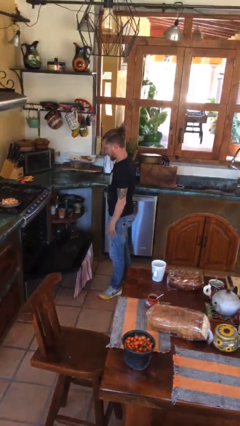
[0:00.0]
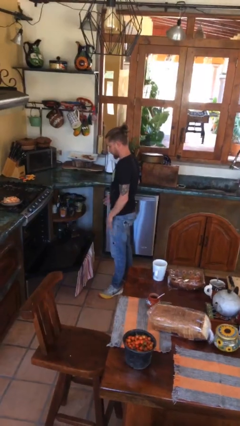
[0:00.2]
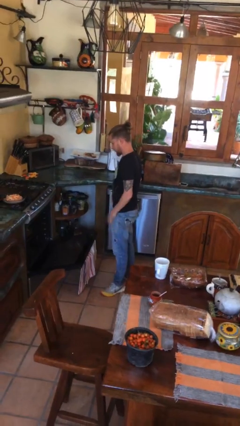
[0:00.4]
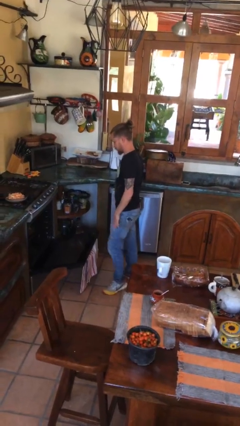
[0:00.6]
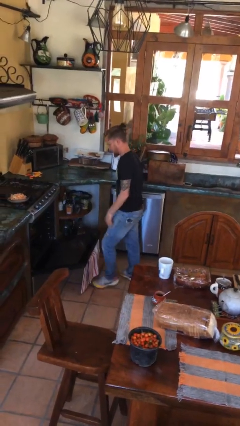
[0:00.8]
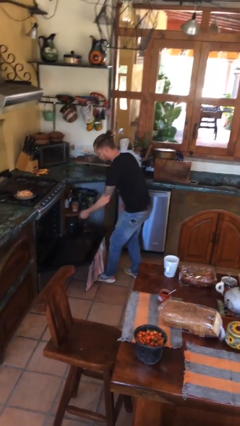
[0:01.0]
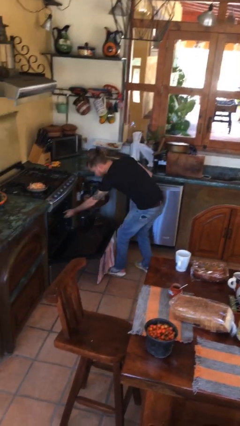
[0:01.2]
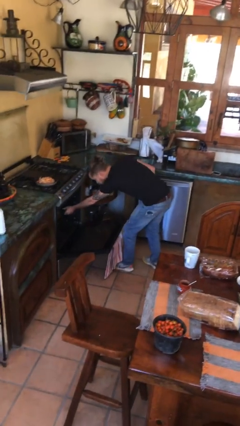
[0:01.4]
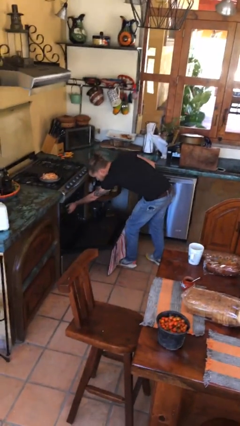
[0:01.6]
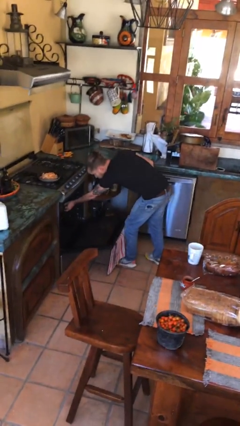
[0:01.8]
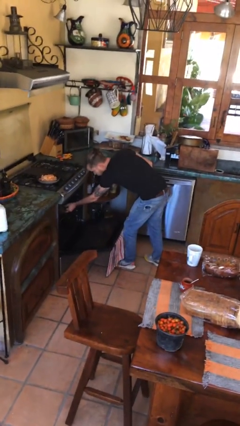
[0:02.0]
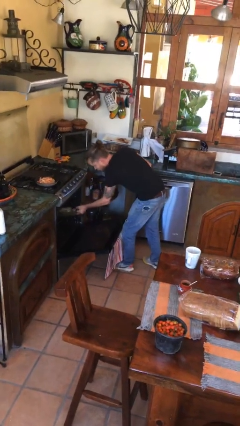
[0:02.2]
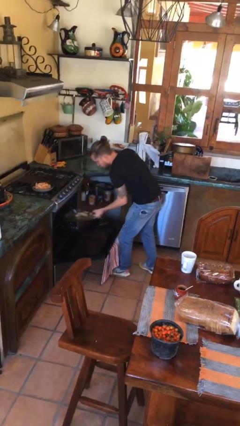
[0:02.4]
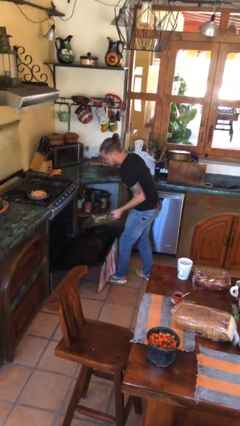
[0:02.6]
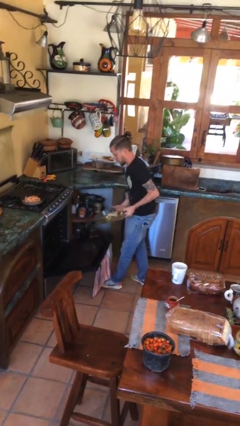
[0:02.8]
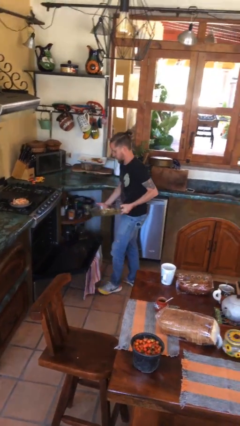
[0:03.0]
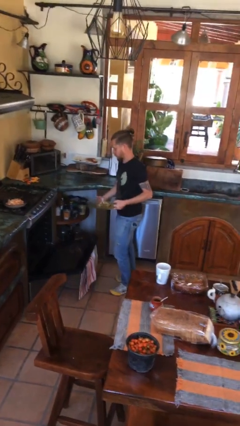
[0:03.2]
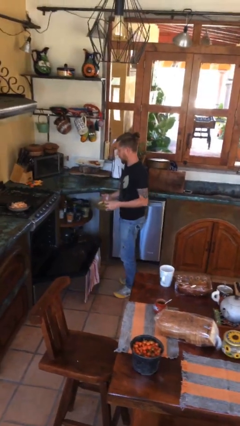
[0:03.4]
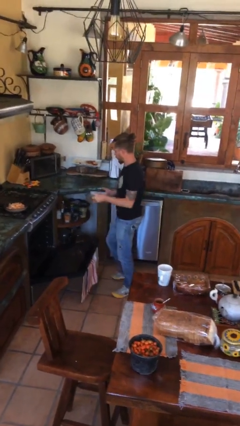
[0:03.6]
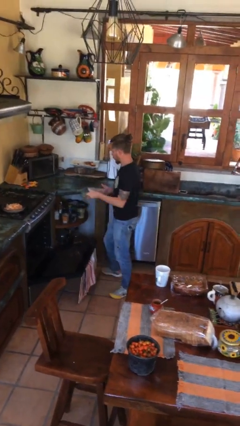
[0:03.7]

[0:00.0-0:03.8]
person takes object from oven

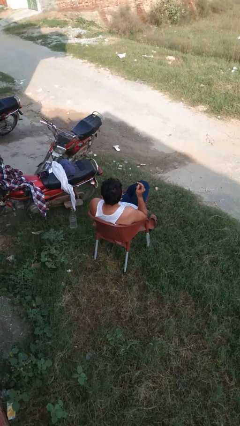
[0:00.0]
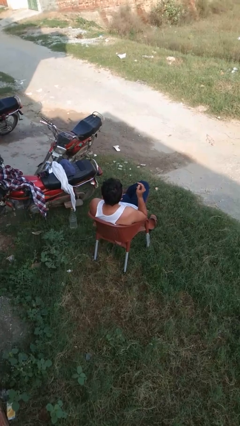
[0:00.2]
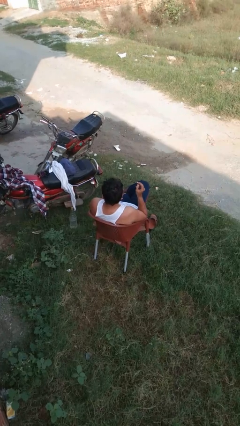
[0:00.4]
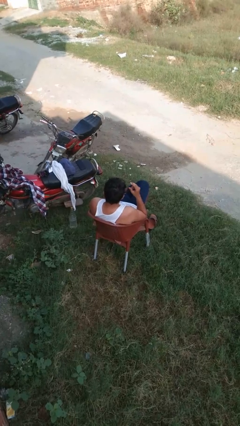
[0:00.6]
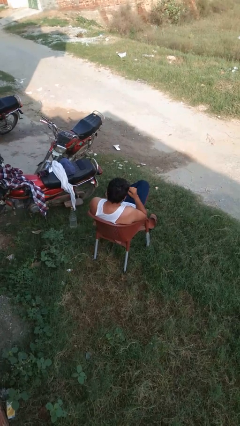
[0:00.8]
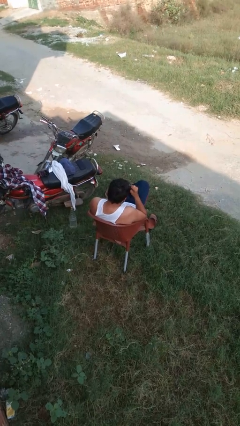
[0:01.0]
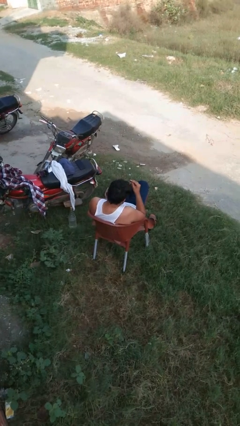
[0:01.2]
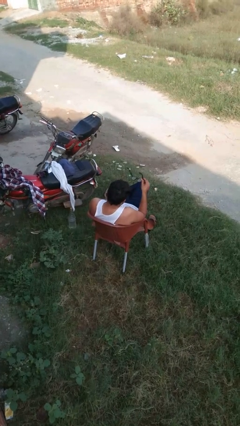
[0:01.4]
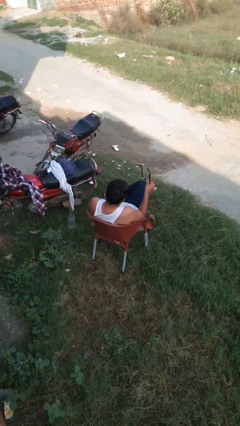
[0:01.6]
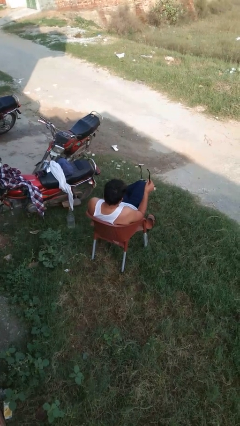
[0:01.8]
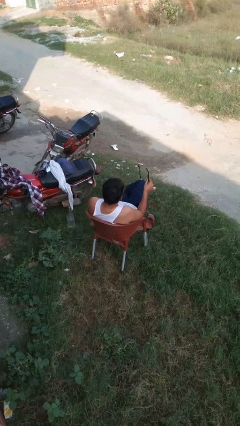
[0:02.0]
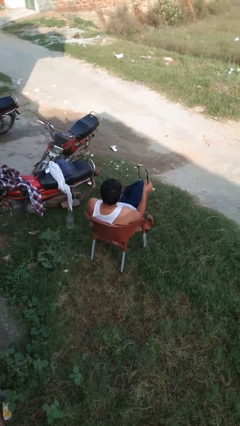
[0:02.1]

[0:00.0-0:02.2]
person takes off glasses

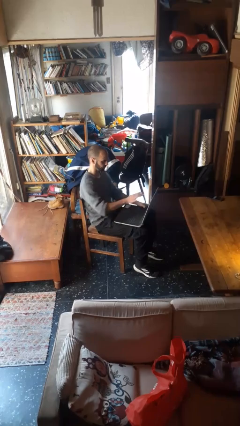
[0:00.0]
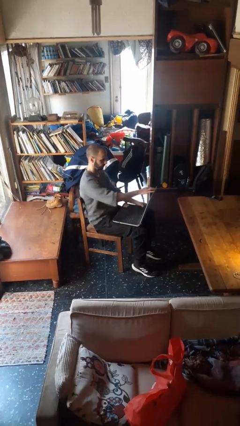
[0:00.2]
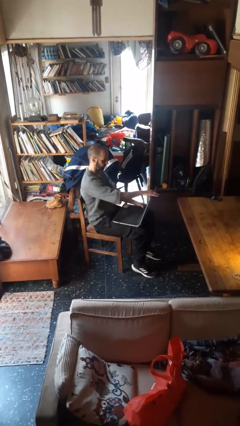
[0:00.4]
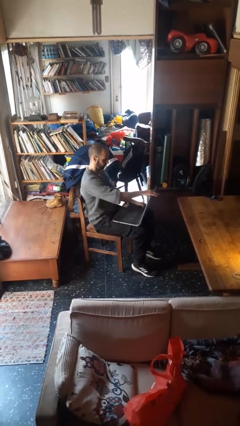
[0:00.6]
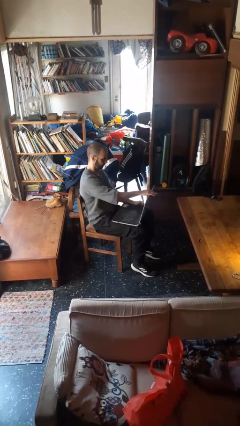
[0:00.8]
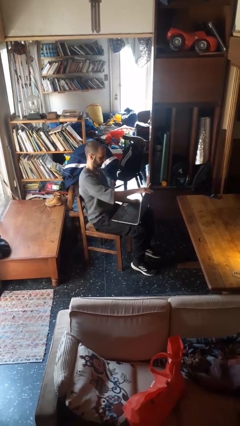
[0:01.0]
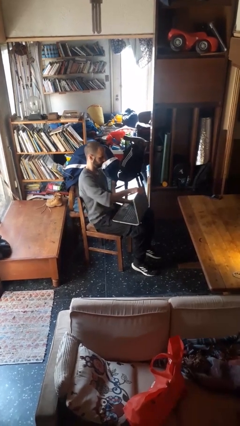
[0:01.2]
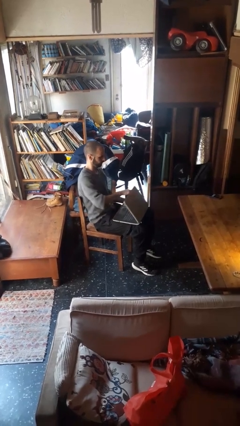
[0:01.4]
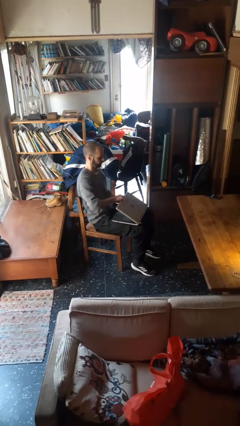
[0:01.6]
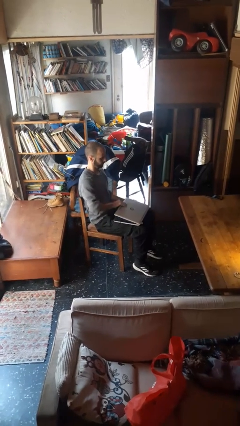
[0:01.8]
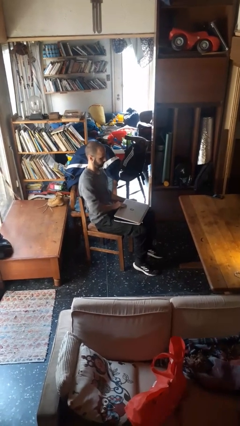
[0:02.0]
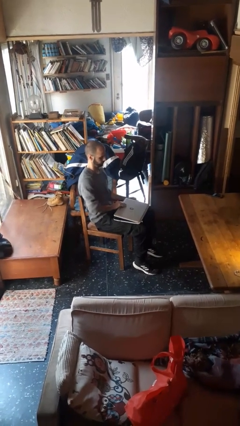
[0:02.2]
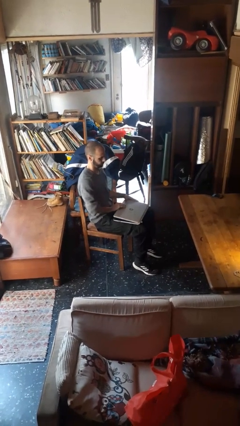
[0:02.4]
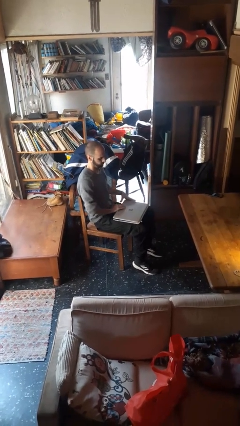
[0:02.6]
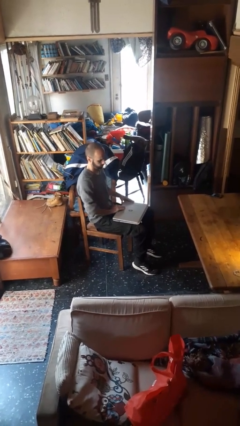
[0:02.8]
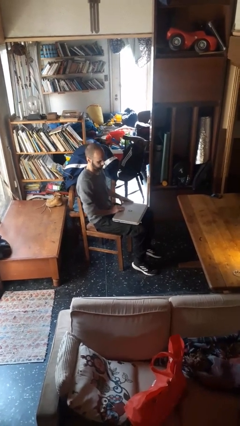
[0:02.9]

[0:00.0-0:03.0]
person closes laptop

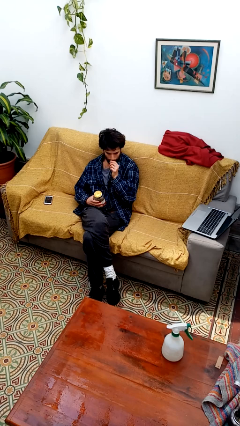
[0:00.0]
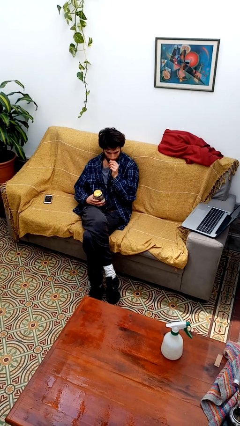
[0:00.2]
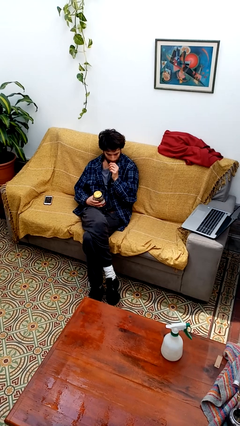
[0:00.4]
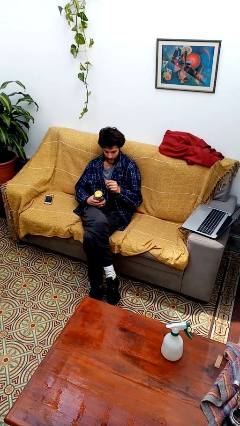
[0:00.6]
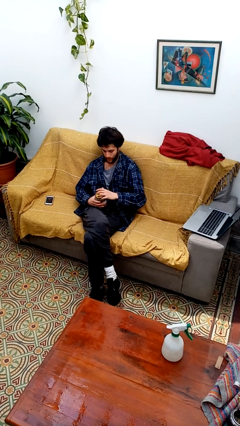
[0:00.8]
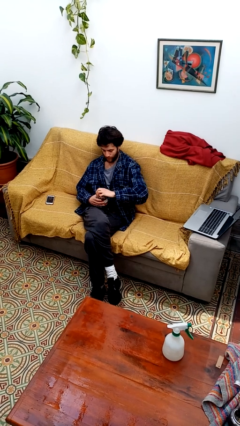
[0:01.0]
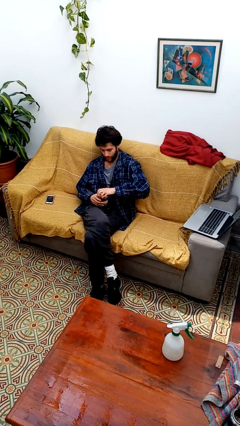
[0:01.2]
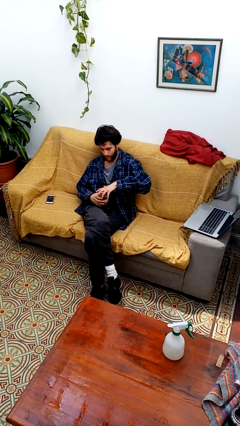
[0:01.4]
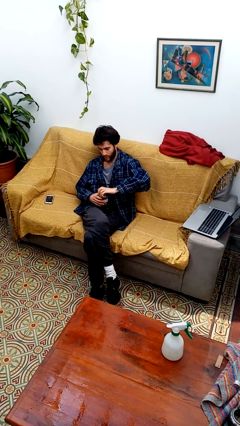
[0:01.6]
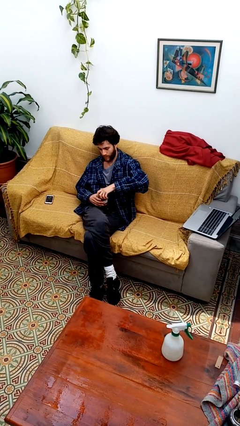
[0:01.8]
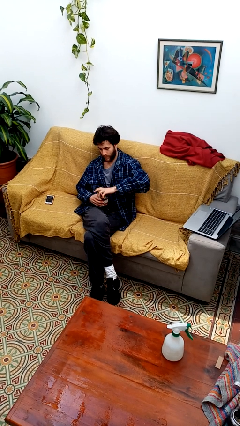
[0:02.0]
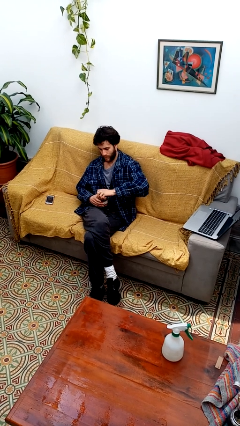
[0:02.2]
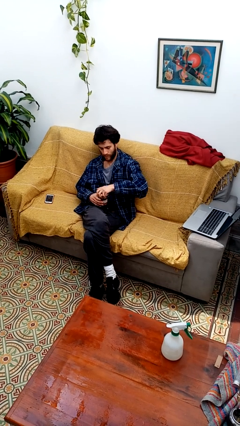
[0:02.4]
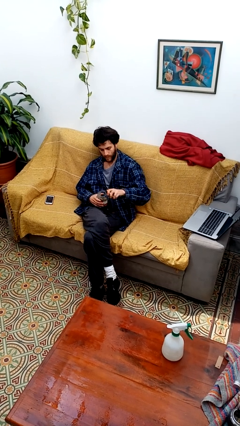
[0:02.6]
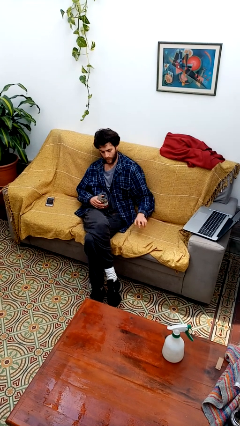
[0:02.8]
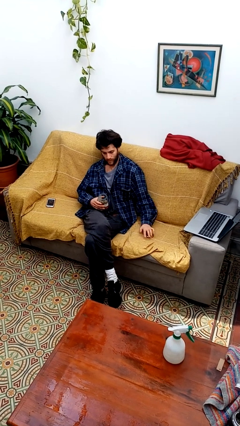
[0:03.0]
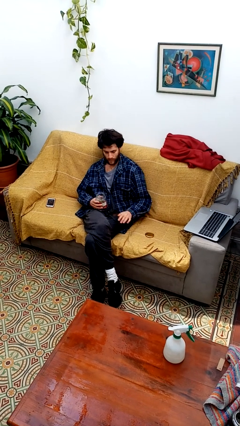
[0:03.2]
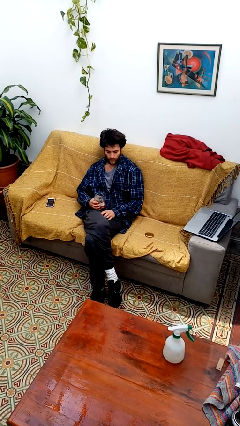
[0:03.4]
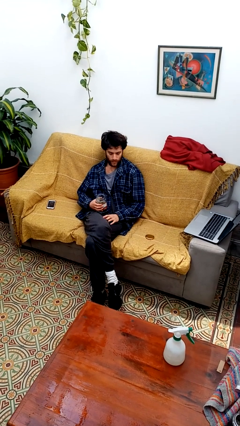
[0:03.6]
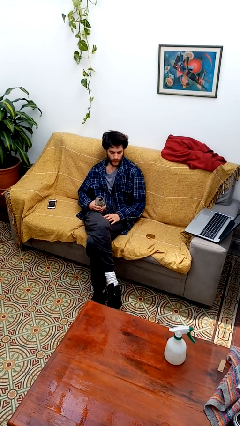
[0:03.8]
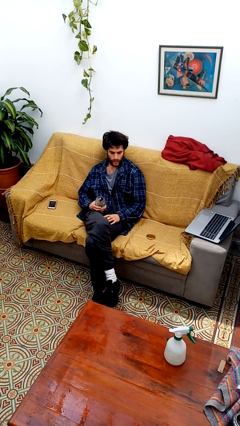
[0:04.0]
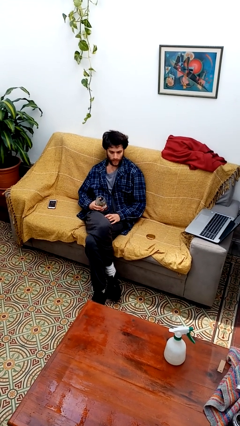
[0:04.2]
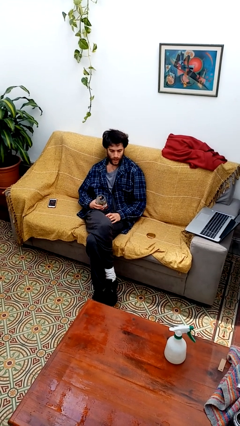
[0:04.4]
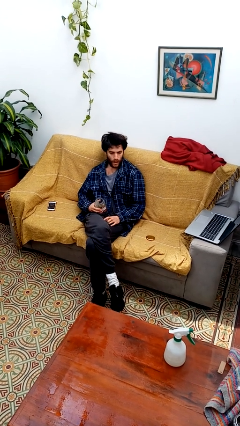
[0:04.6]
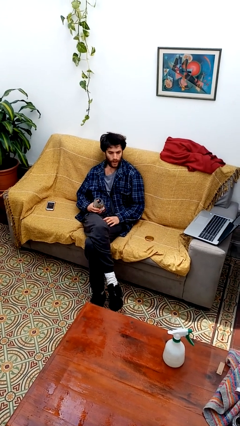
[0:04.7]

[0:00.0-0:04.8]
person opens jar

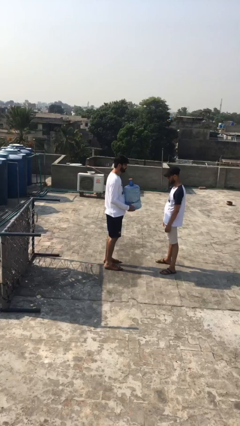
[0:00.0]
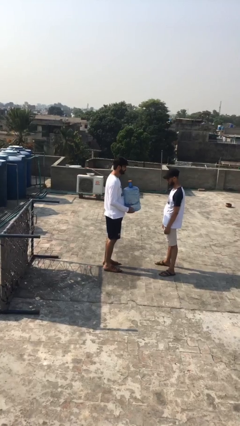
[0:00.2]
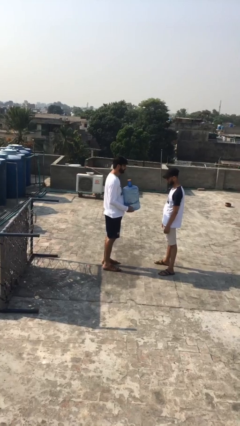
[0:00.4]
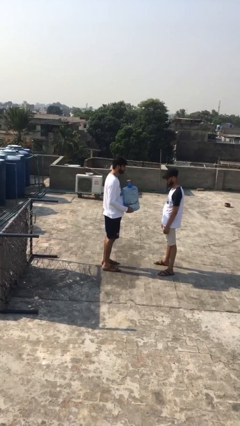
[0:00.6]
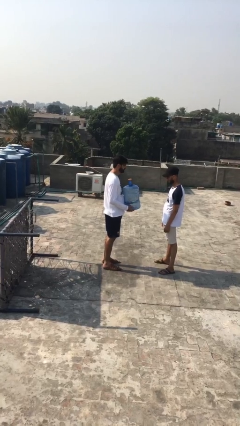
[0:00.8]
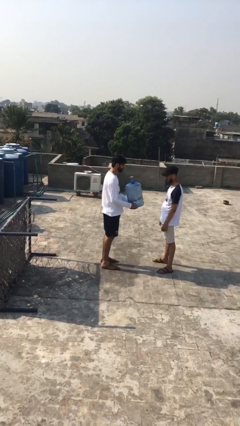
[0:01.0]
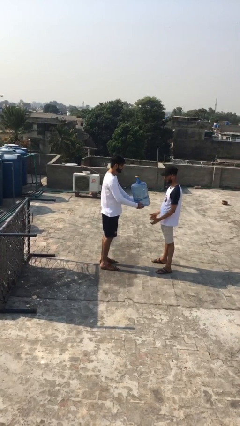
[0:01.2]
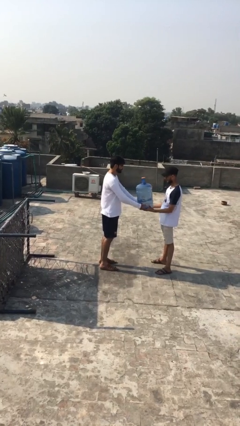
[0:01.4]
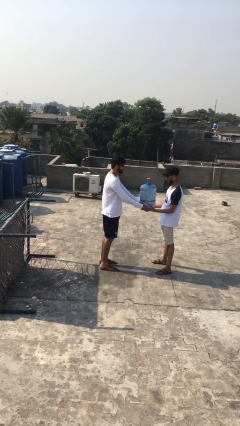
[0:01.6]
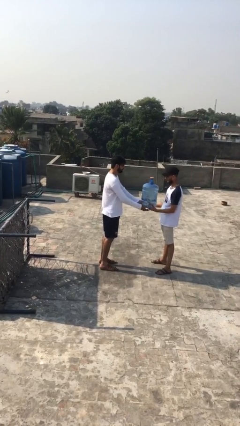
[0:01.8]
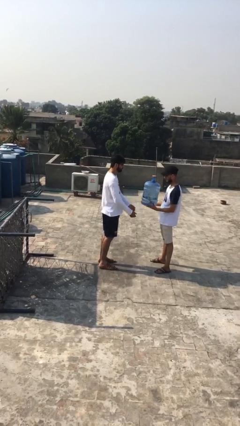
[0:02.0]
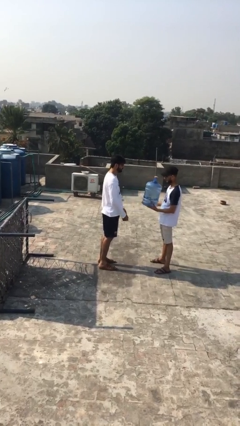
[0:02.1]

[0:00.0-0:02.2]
person transfers object to person

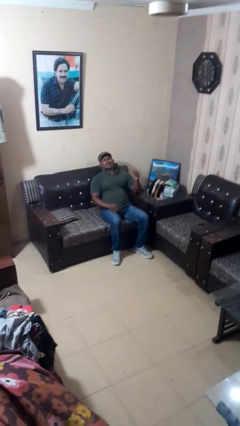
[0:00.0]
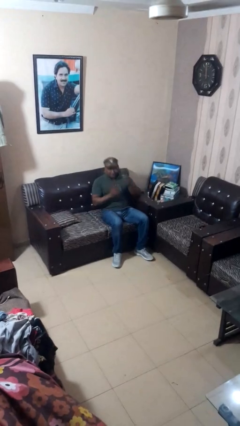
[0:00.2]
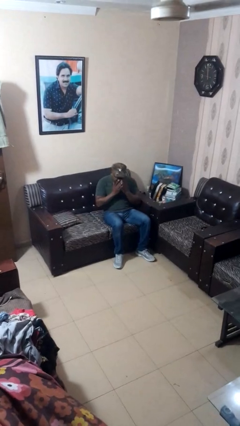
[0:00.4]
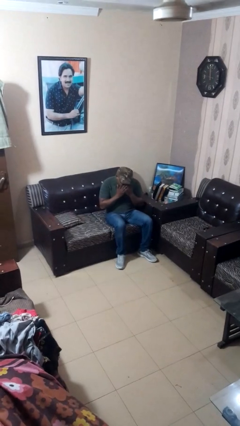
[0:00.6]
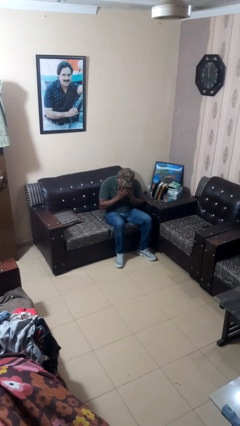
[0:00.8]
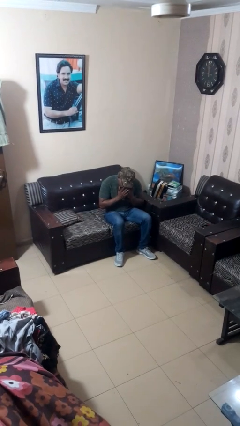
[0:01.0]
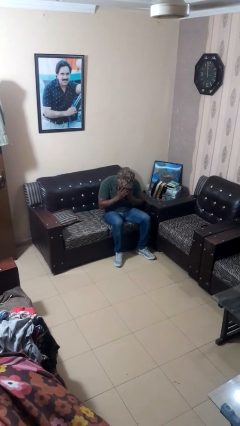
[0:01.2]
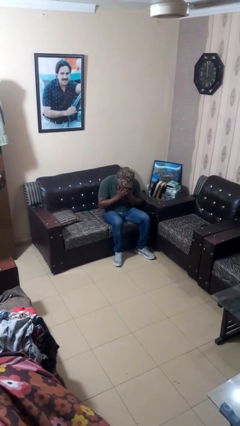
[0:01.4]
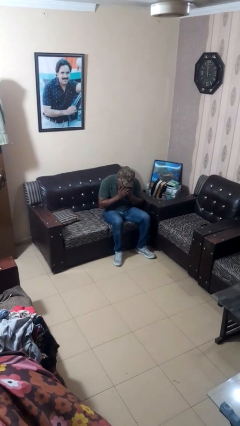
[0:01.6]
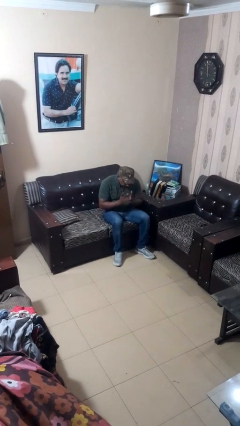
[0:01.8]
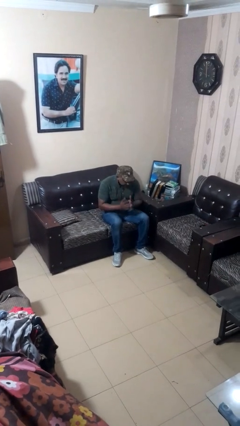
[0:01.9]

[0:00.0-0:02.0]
person sneezes into hand
